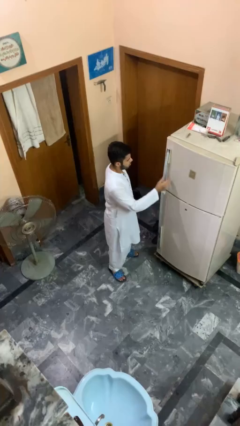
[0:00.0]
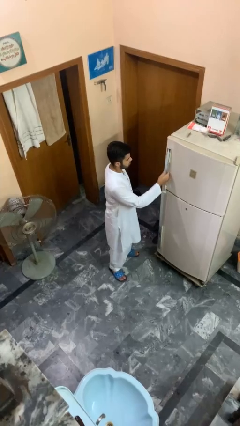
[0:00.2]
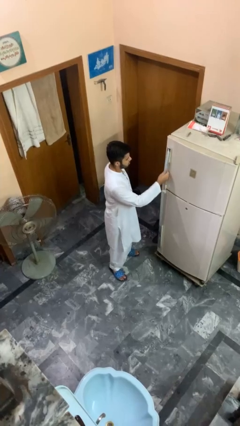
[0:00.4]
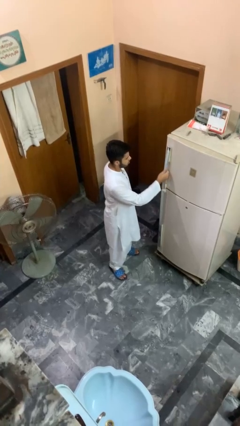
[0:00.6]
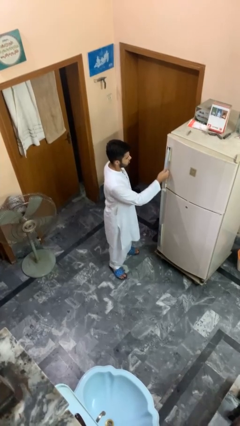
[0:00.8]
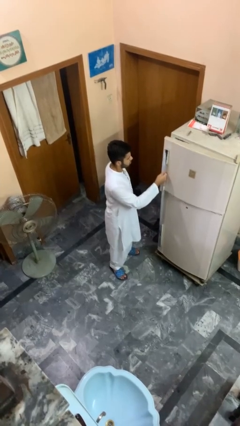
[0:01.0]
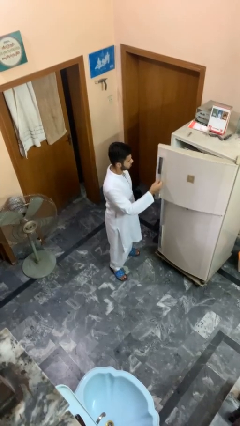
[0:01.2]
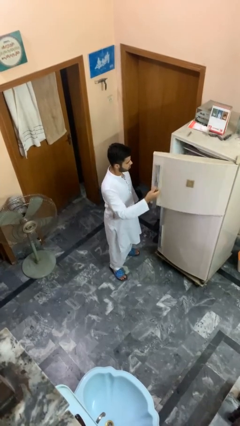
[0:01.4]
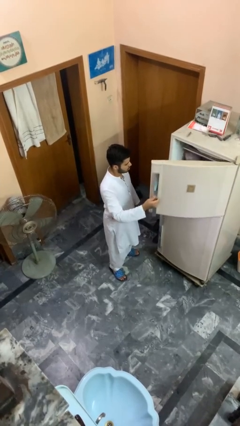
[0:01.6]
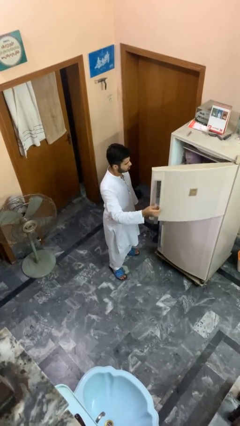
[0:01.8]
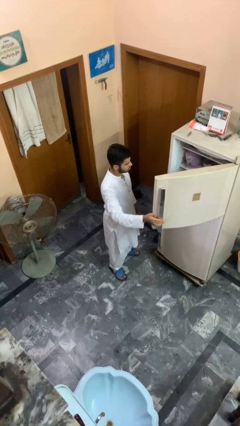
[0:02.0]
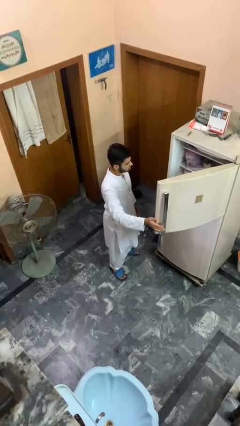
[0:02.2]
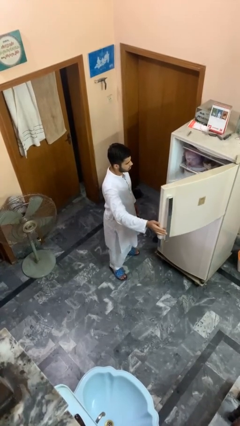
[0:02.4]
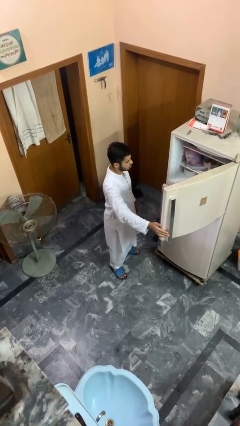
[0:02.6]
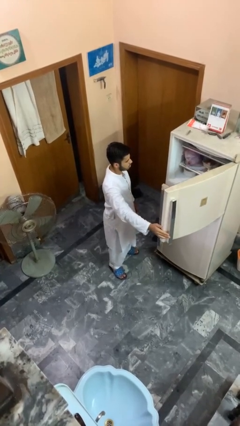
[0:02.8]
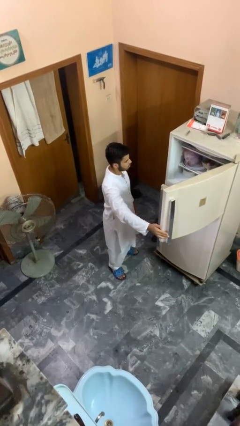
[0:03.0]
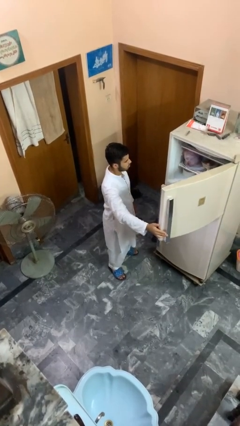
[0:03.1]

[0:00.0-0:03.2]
person opens refrigerator

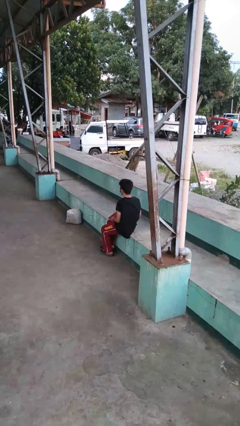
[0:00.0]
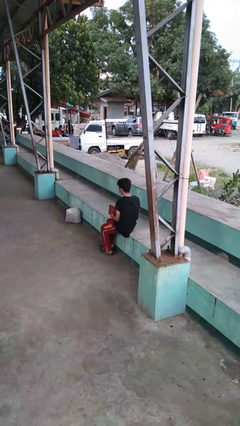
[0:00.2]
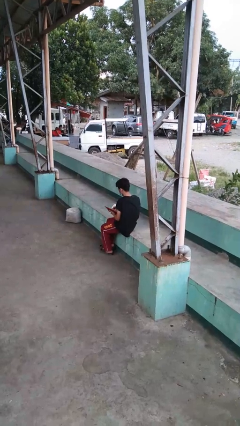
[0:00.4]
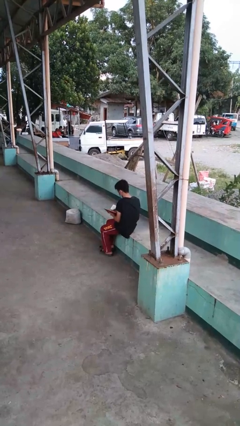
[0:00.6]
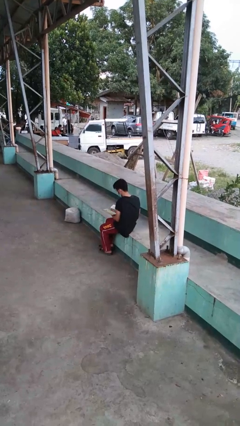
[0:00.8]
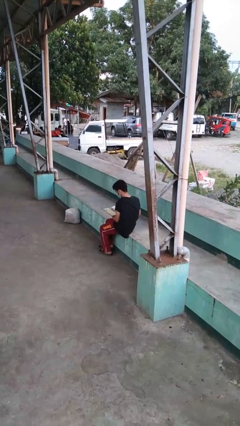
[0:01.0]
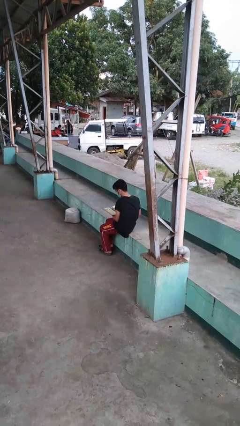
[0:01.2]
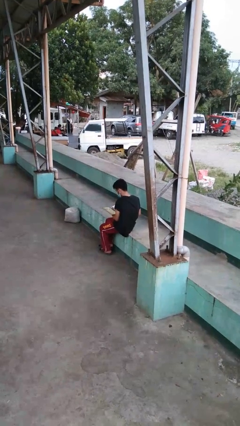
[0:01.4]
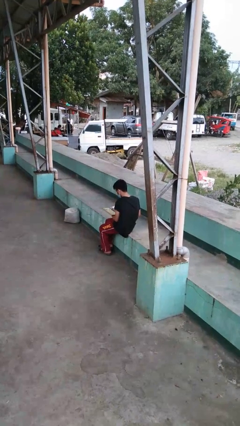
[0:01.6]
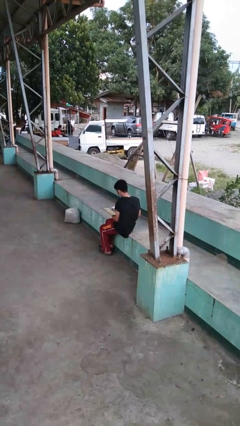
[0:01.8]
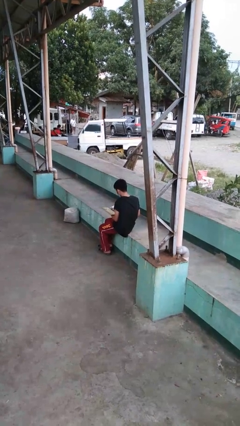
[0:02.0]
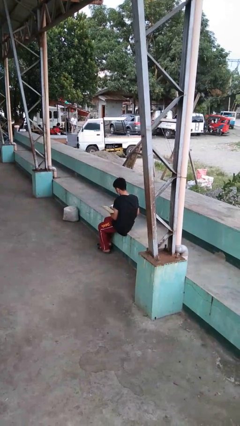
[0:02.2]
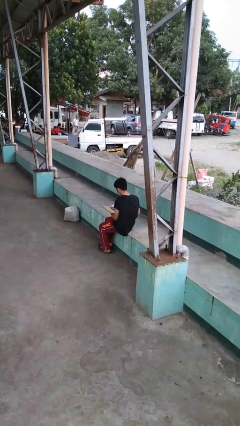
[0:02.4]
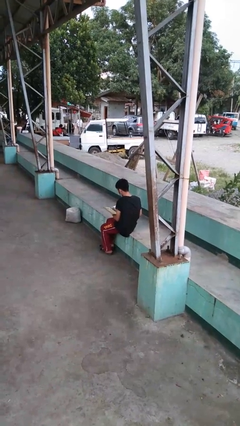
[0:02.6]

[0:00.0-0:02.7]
person reads book

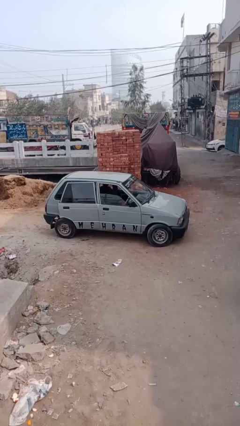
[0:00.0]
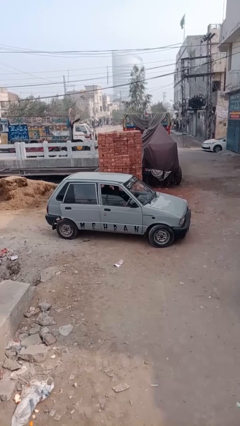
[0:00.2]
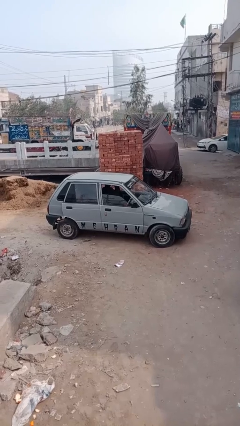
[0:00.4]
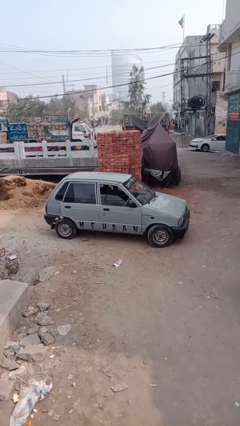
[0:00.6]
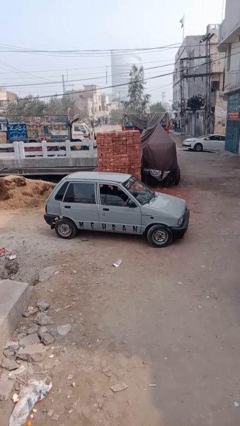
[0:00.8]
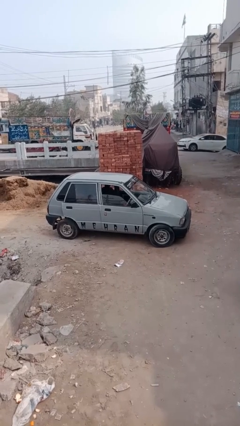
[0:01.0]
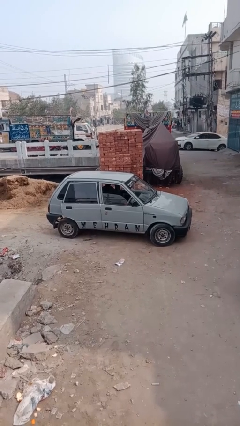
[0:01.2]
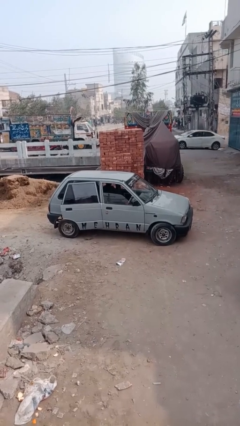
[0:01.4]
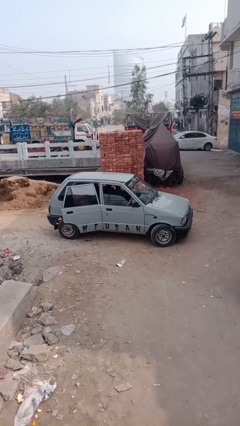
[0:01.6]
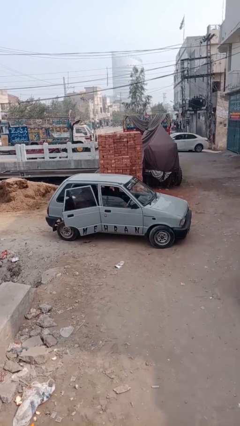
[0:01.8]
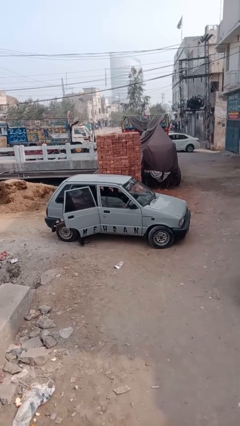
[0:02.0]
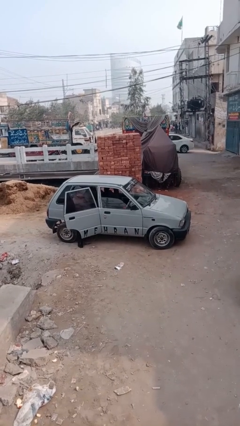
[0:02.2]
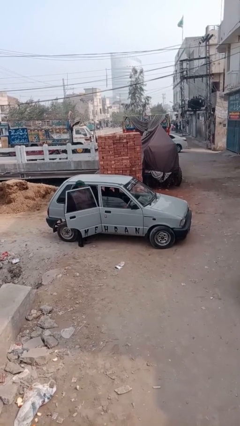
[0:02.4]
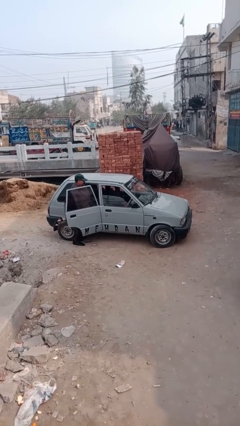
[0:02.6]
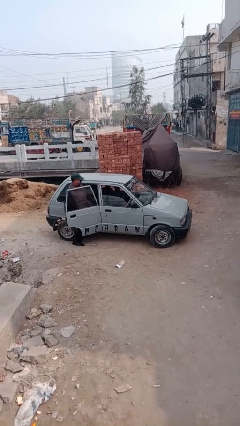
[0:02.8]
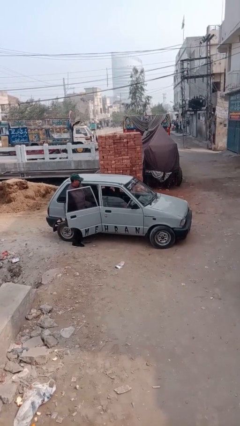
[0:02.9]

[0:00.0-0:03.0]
car drops off person

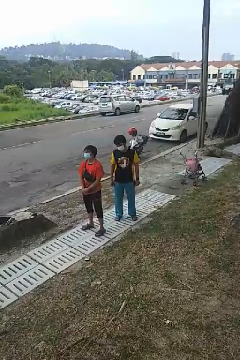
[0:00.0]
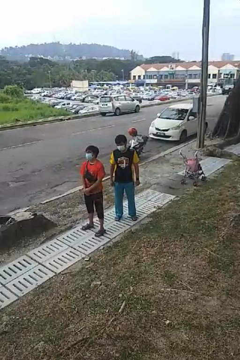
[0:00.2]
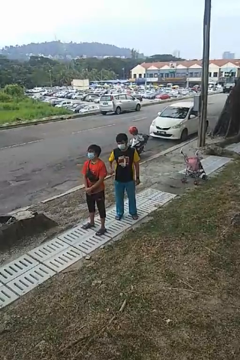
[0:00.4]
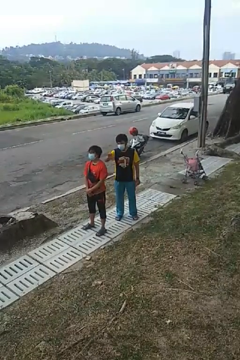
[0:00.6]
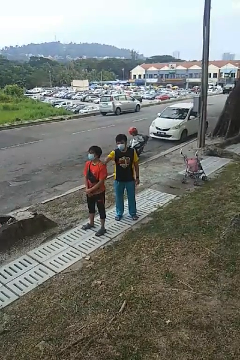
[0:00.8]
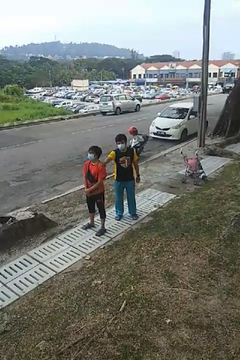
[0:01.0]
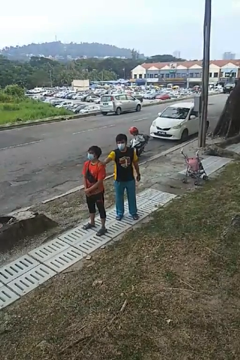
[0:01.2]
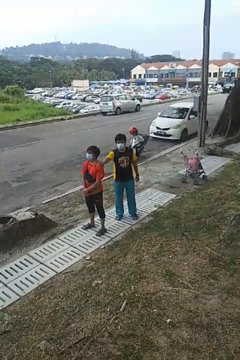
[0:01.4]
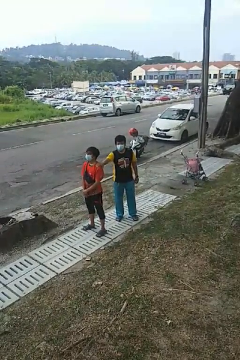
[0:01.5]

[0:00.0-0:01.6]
person grabs person by shoulder

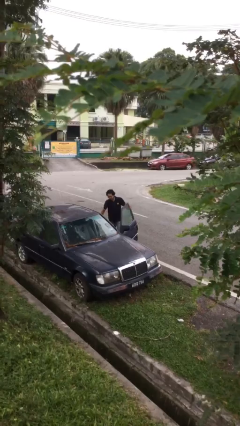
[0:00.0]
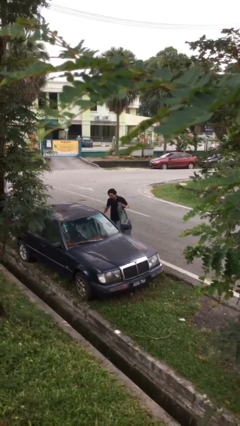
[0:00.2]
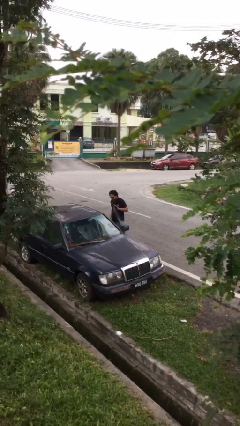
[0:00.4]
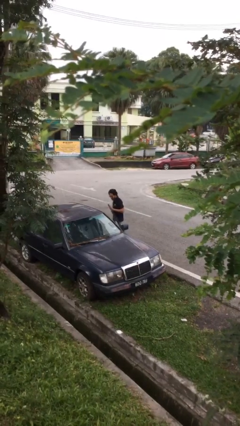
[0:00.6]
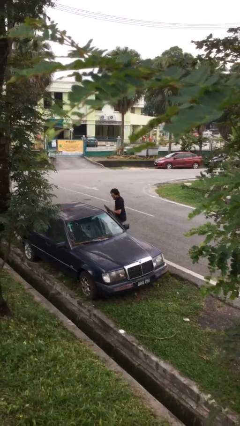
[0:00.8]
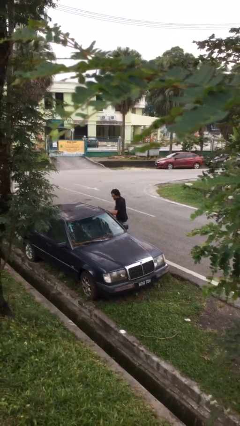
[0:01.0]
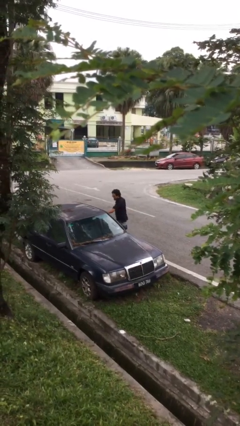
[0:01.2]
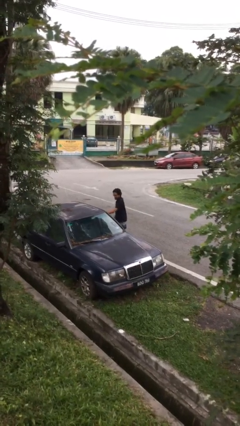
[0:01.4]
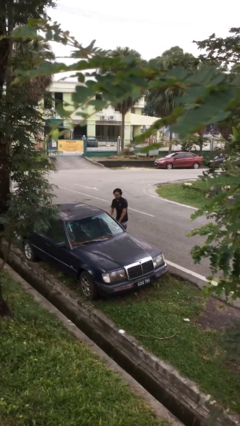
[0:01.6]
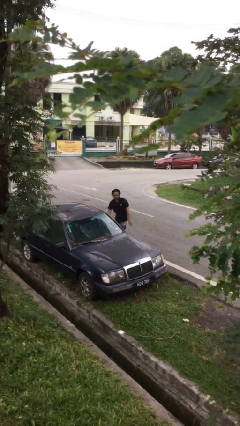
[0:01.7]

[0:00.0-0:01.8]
person closes car door

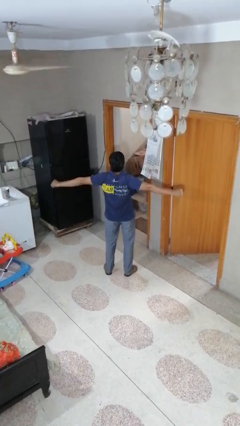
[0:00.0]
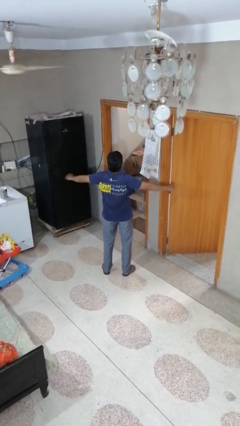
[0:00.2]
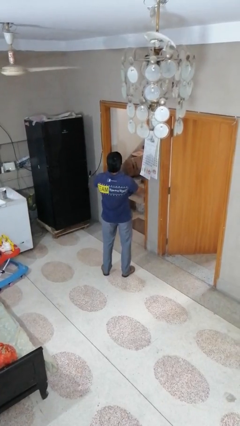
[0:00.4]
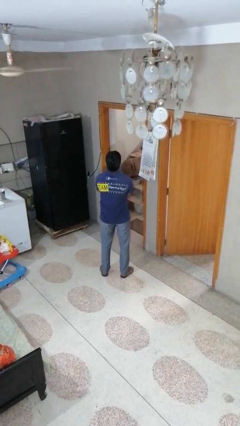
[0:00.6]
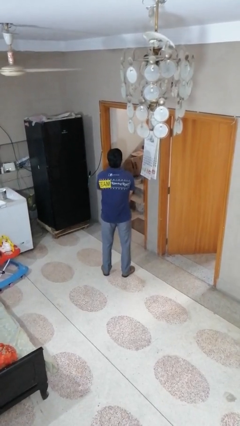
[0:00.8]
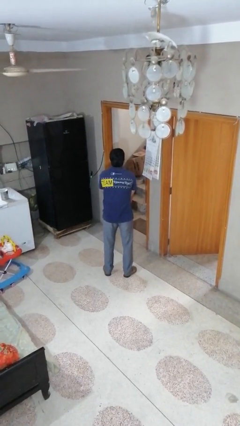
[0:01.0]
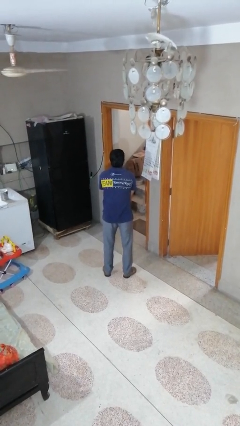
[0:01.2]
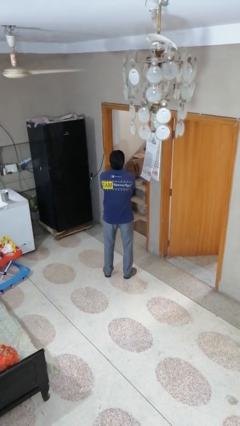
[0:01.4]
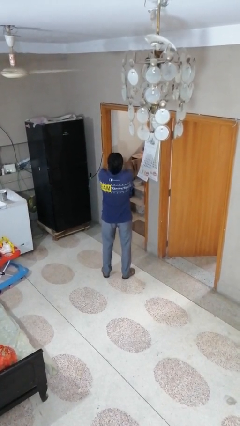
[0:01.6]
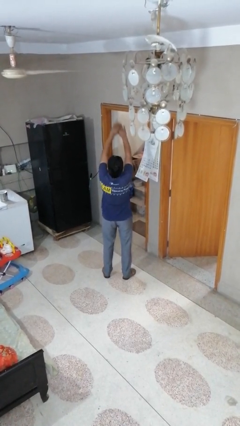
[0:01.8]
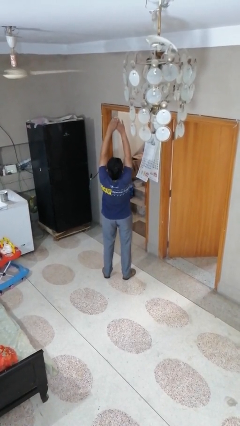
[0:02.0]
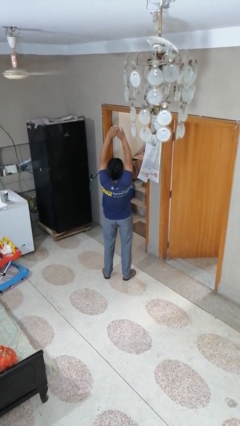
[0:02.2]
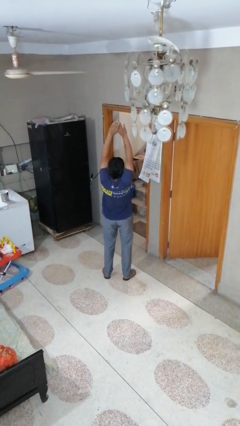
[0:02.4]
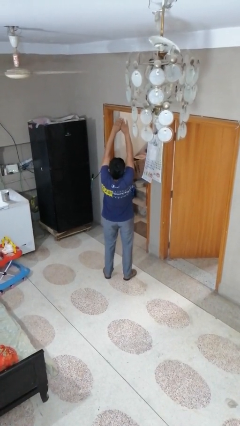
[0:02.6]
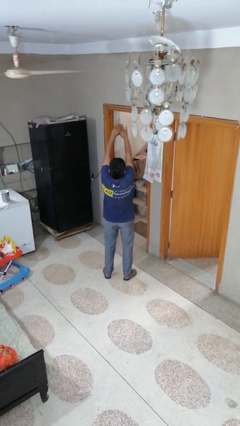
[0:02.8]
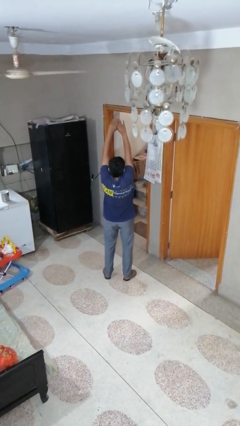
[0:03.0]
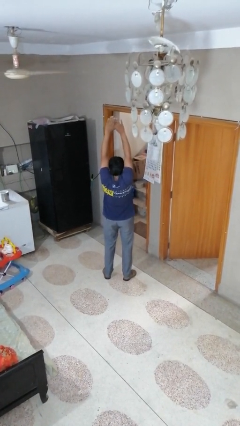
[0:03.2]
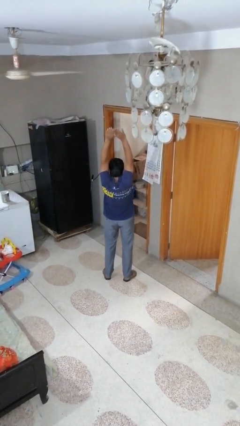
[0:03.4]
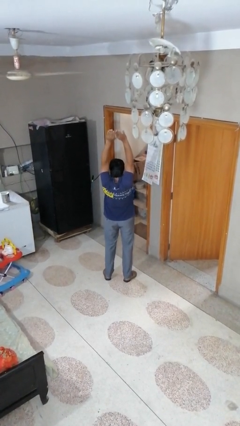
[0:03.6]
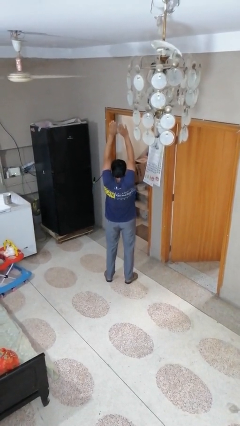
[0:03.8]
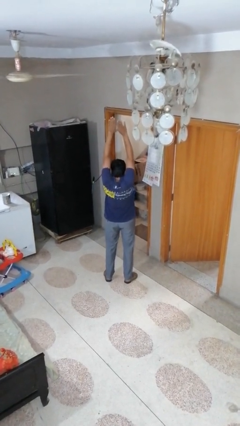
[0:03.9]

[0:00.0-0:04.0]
person stretches arms over head

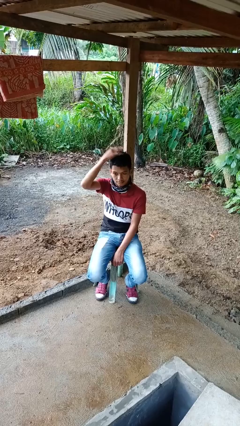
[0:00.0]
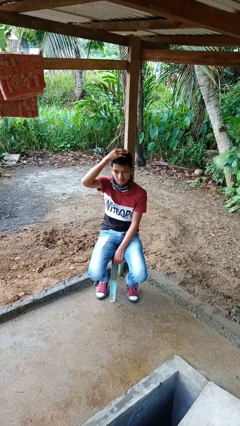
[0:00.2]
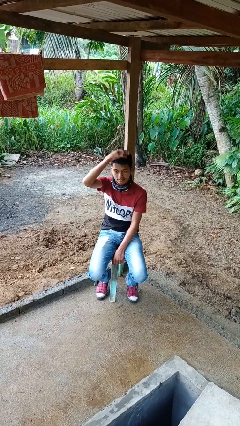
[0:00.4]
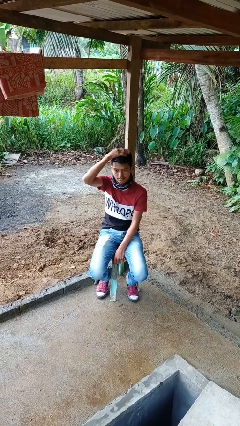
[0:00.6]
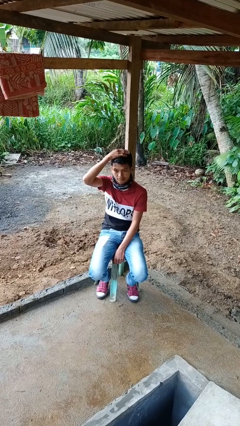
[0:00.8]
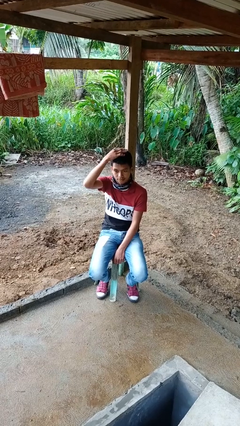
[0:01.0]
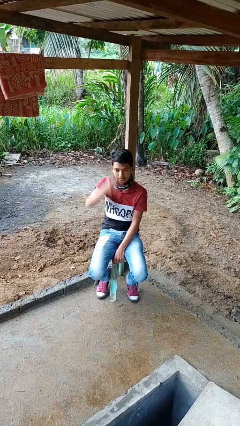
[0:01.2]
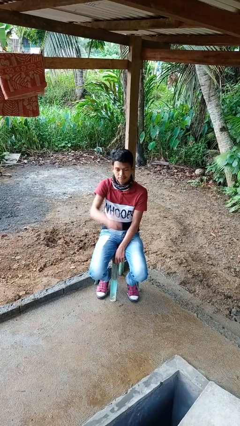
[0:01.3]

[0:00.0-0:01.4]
person pats head
